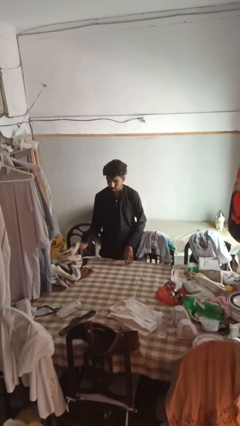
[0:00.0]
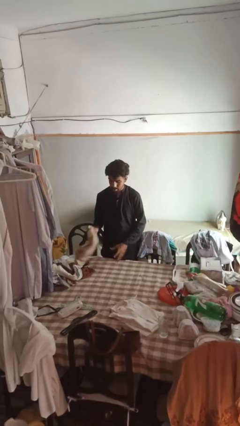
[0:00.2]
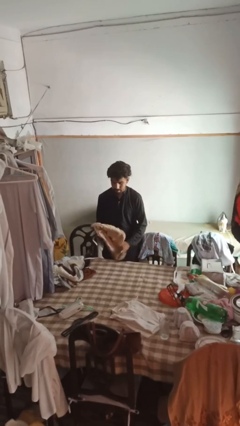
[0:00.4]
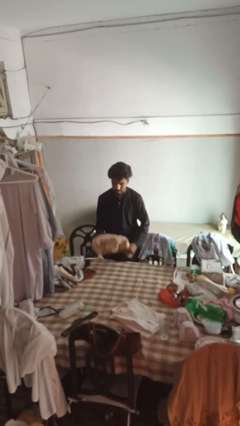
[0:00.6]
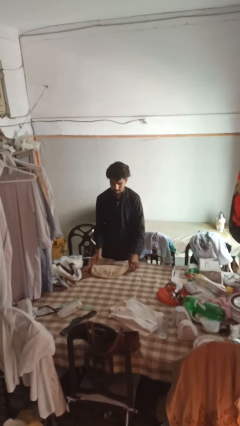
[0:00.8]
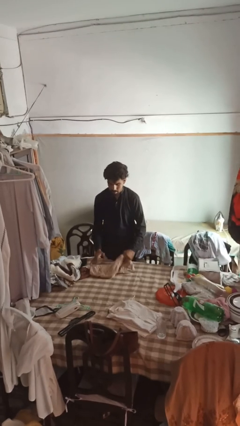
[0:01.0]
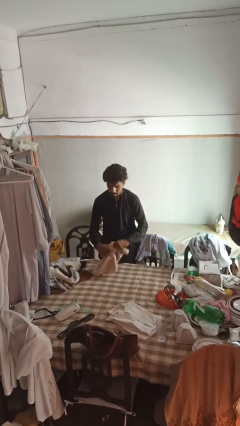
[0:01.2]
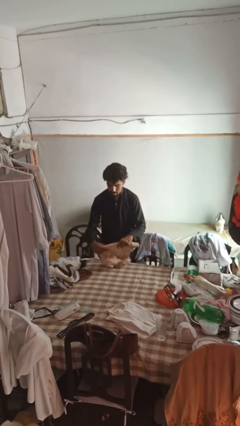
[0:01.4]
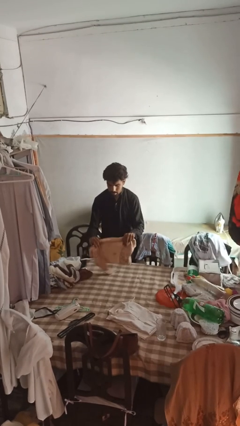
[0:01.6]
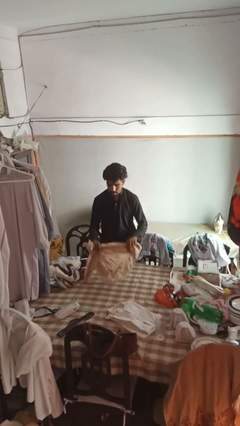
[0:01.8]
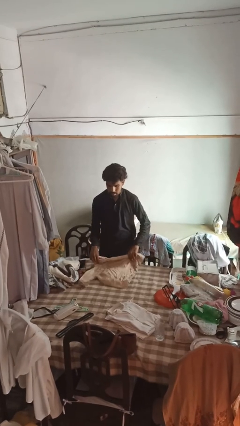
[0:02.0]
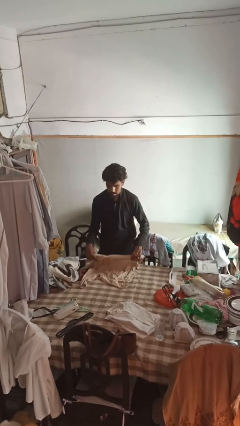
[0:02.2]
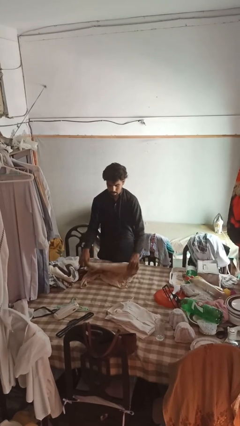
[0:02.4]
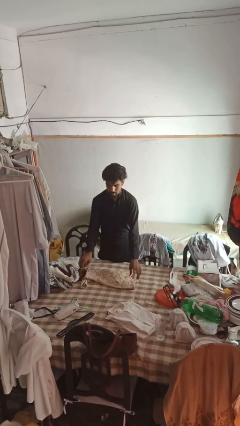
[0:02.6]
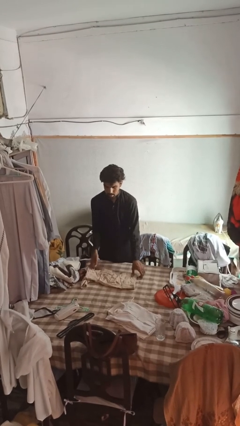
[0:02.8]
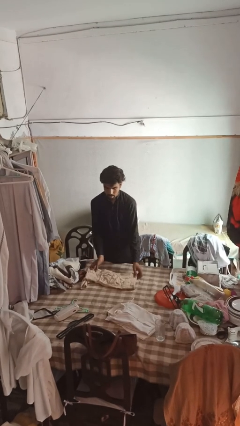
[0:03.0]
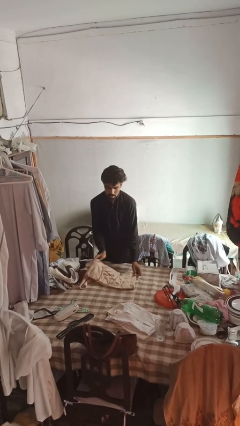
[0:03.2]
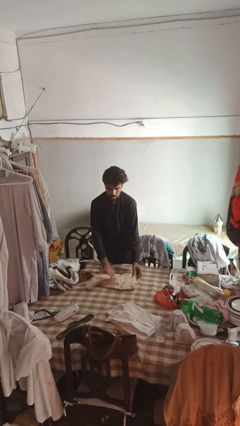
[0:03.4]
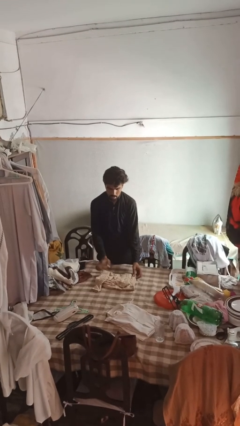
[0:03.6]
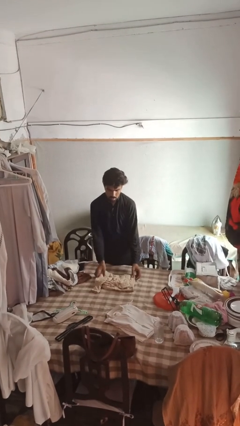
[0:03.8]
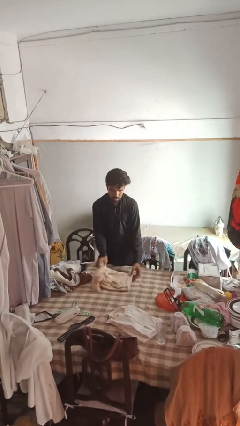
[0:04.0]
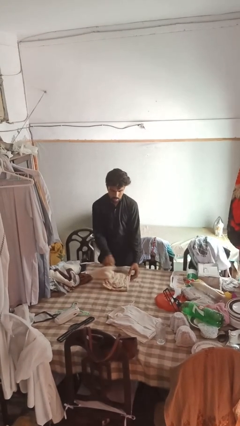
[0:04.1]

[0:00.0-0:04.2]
person folds shirt

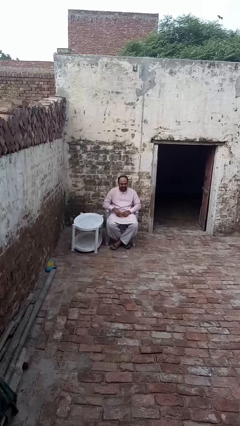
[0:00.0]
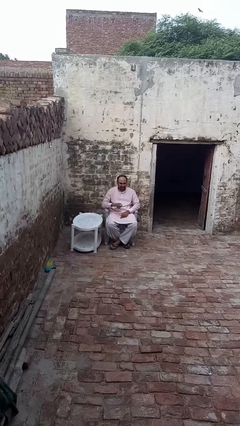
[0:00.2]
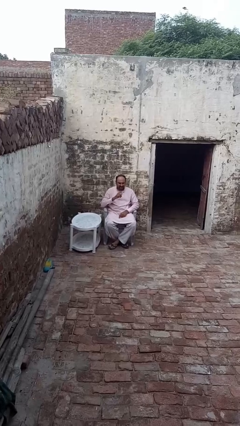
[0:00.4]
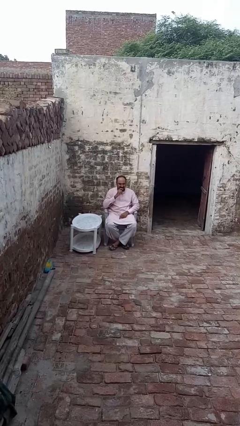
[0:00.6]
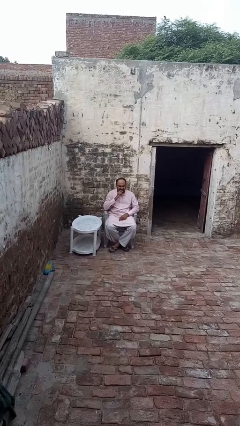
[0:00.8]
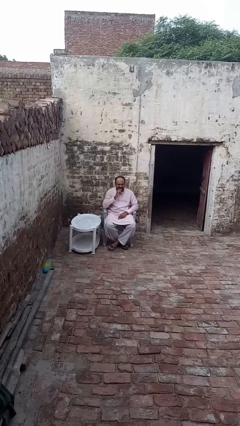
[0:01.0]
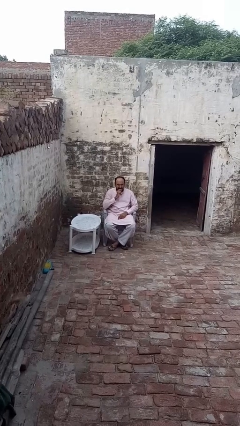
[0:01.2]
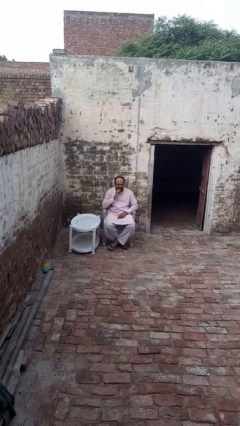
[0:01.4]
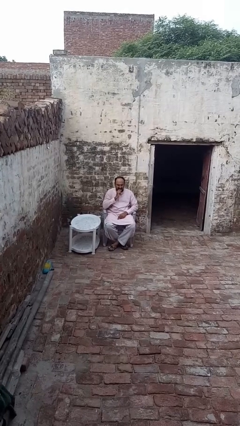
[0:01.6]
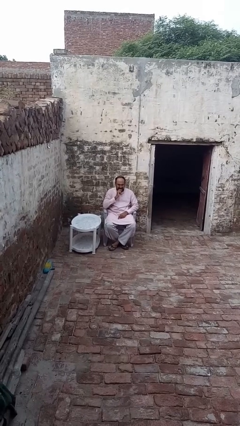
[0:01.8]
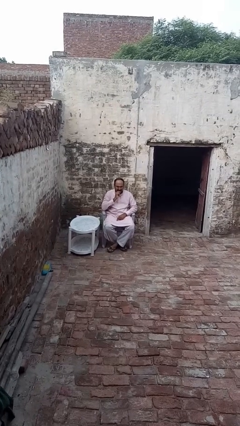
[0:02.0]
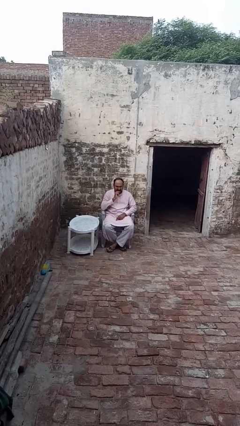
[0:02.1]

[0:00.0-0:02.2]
person strokes chin

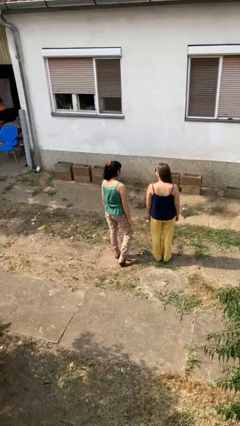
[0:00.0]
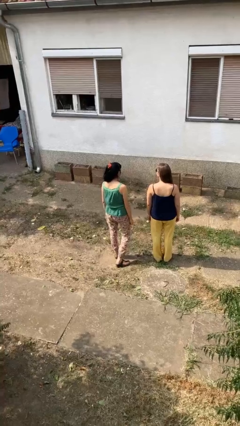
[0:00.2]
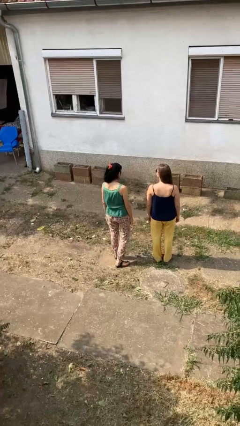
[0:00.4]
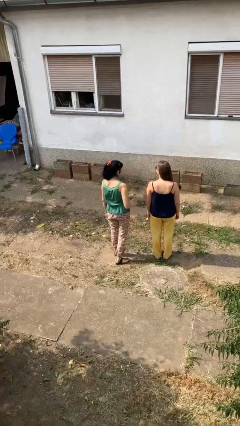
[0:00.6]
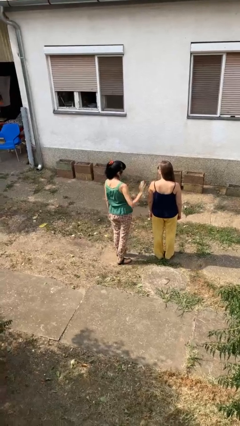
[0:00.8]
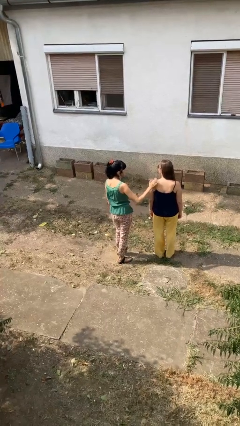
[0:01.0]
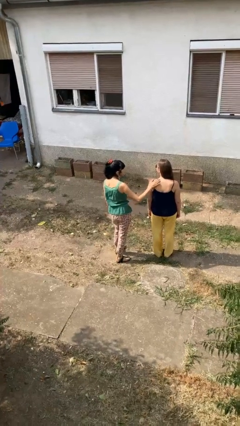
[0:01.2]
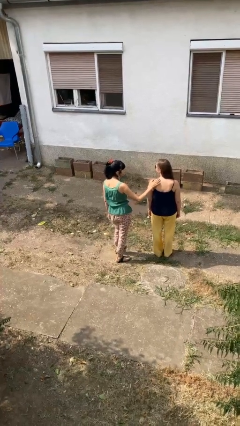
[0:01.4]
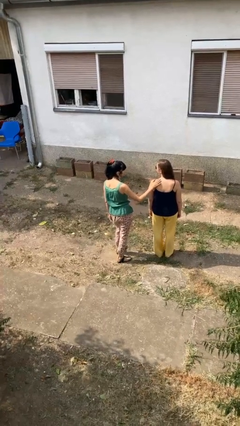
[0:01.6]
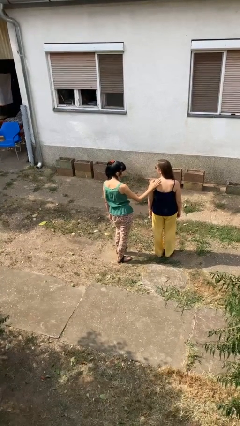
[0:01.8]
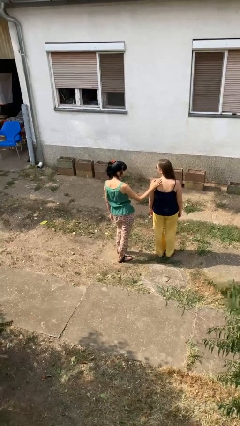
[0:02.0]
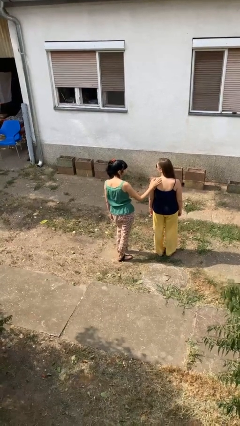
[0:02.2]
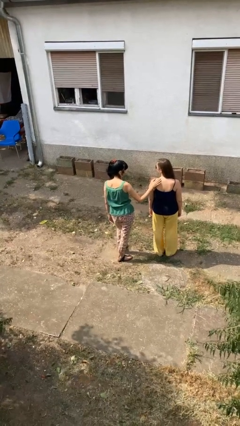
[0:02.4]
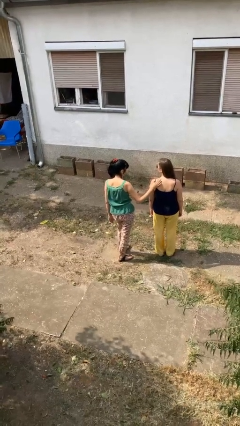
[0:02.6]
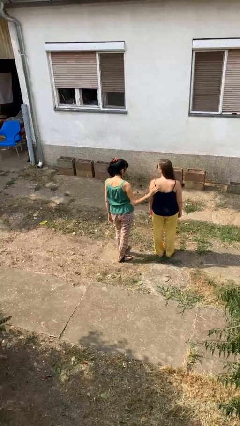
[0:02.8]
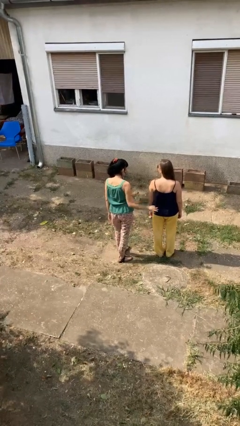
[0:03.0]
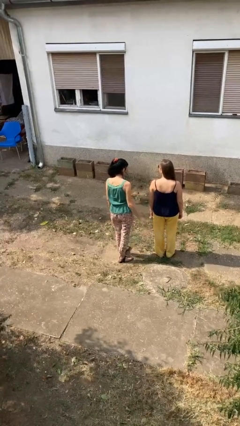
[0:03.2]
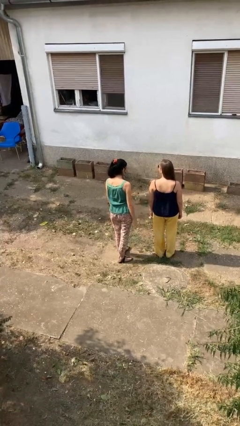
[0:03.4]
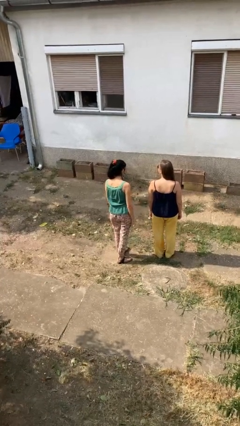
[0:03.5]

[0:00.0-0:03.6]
person touches back of person

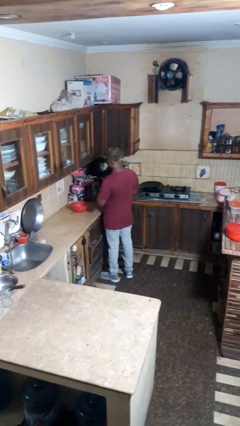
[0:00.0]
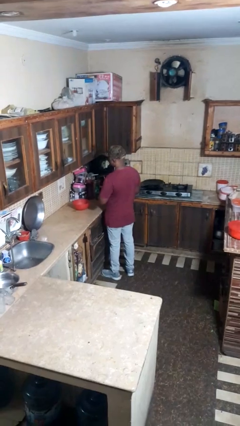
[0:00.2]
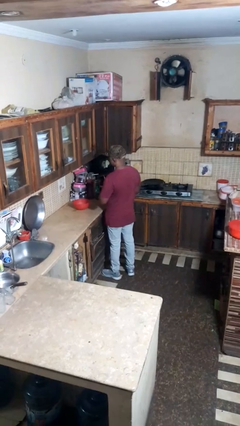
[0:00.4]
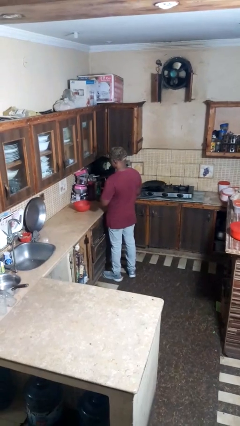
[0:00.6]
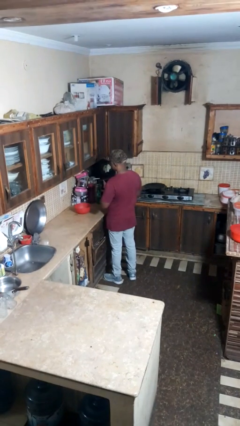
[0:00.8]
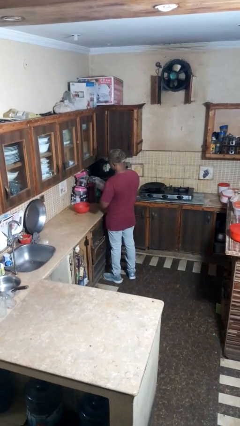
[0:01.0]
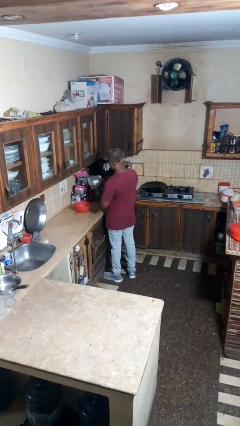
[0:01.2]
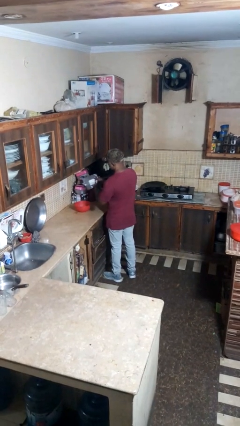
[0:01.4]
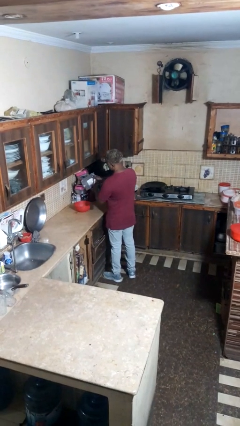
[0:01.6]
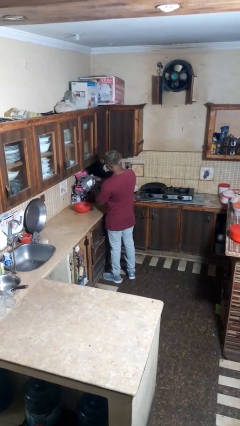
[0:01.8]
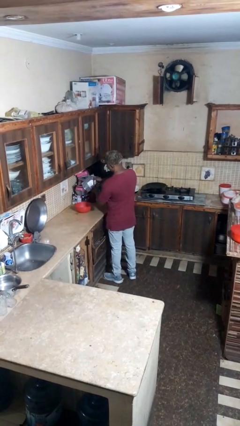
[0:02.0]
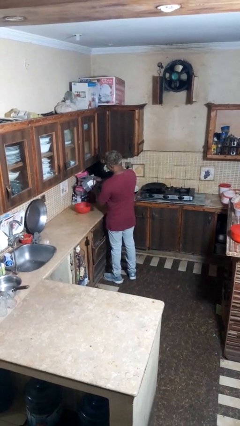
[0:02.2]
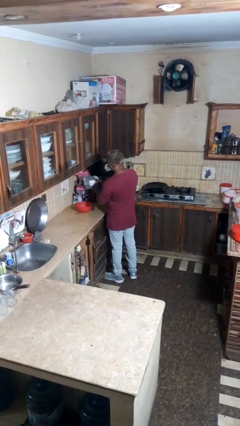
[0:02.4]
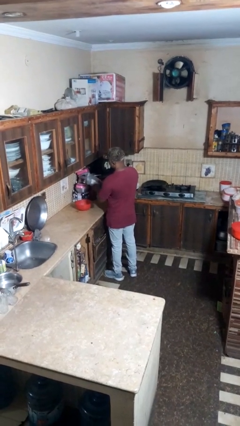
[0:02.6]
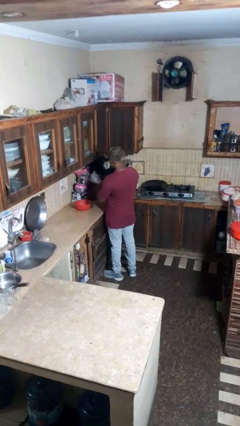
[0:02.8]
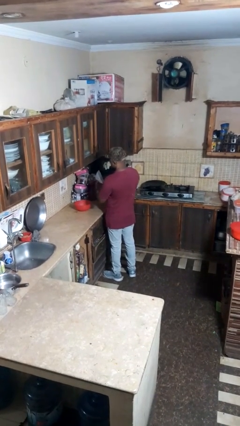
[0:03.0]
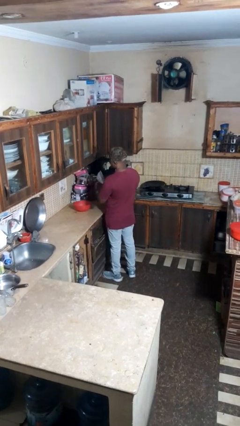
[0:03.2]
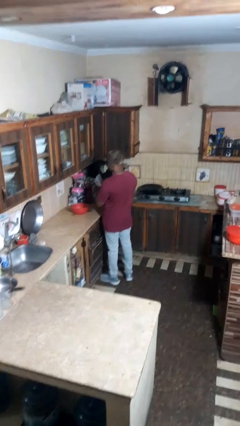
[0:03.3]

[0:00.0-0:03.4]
person pours into bowl

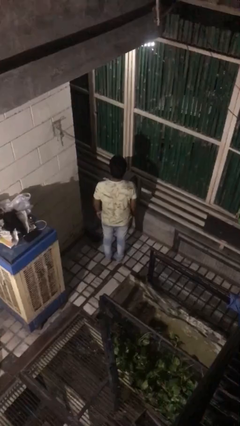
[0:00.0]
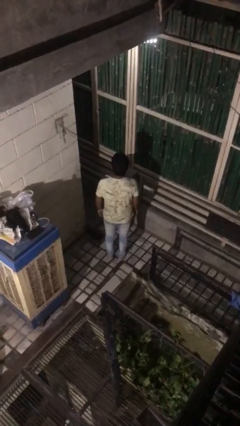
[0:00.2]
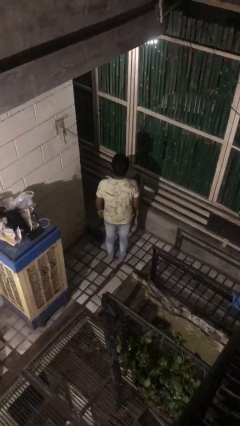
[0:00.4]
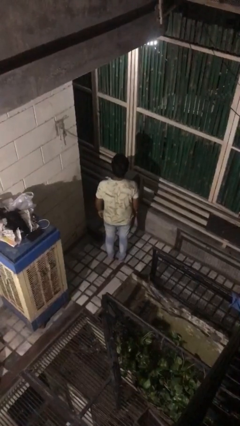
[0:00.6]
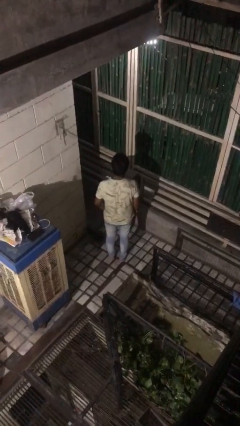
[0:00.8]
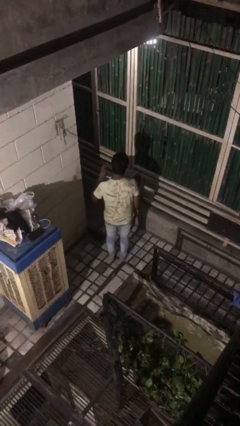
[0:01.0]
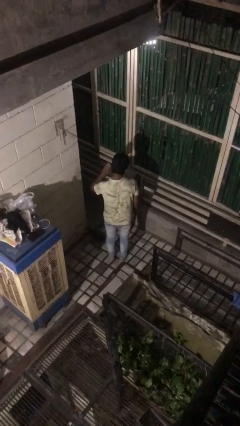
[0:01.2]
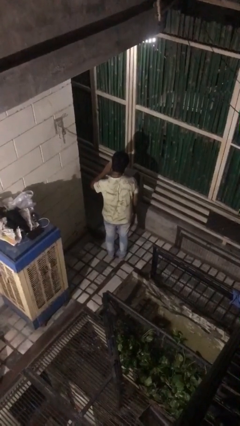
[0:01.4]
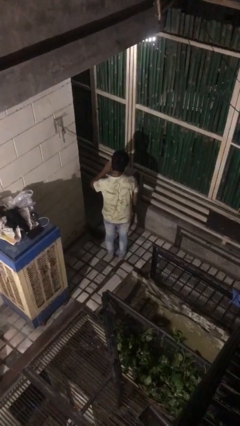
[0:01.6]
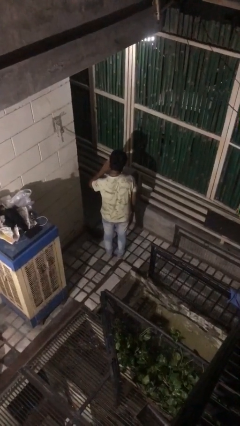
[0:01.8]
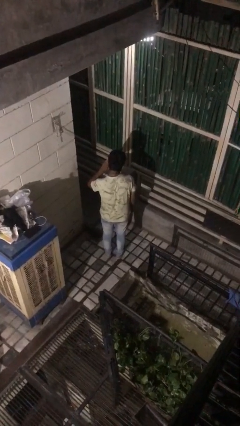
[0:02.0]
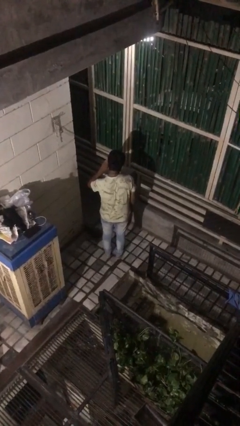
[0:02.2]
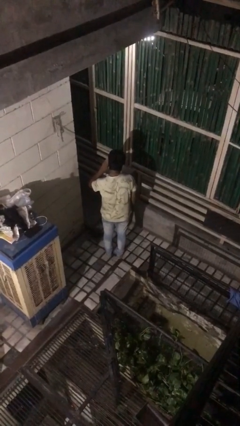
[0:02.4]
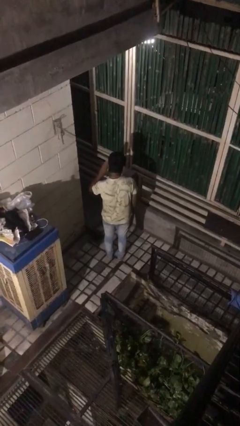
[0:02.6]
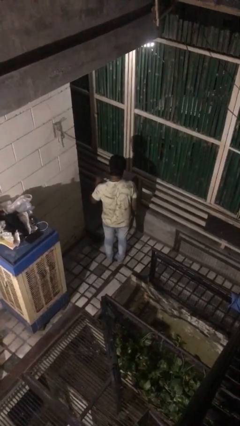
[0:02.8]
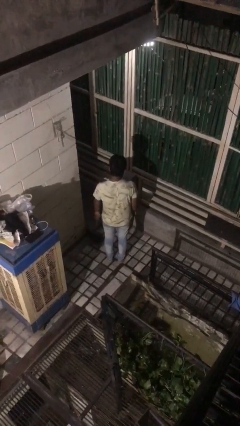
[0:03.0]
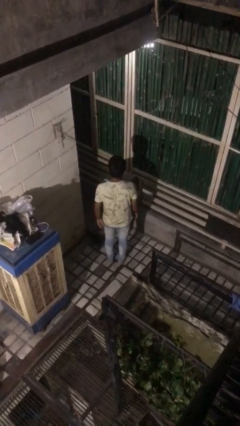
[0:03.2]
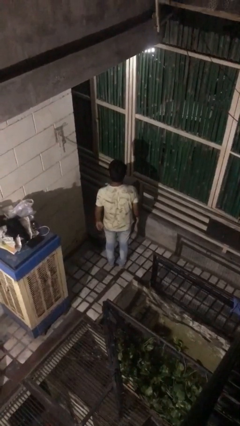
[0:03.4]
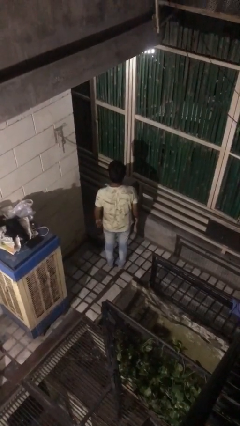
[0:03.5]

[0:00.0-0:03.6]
person gestures listen closely

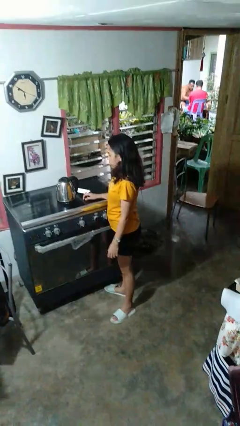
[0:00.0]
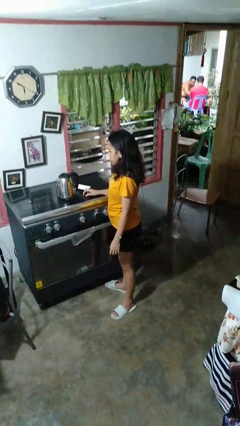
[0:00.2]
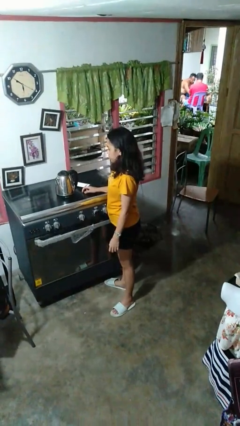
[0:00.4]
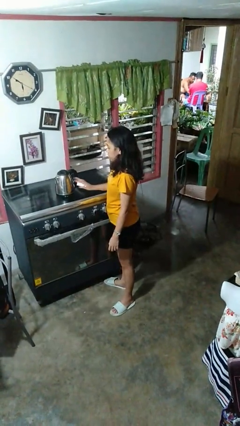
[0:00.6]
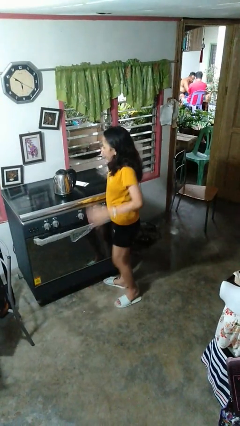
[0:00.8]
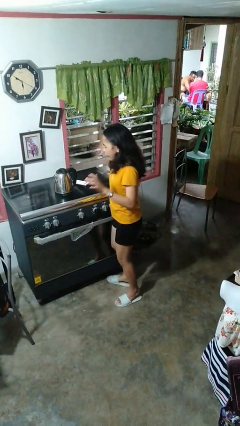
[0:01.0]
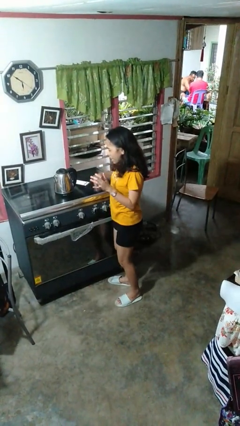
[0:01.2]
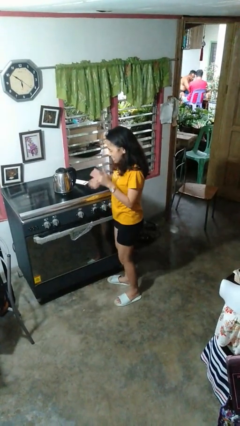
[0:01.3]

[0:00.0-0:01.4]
person burns hand
